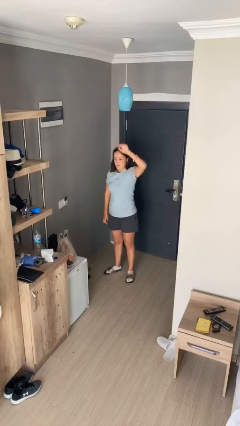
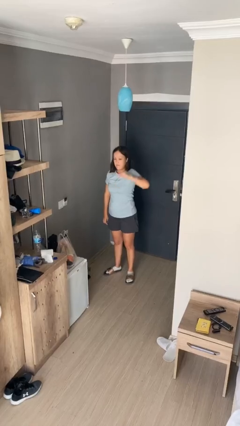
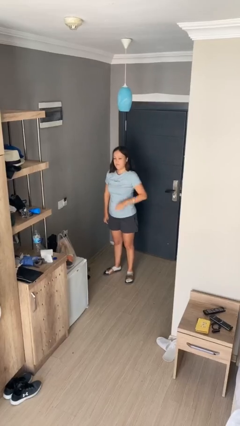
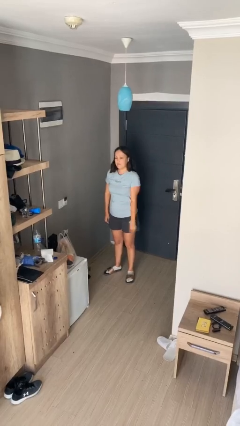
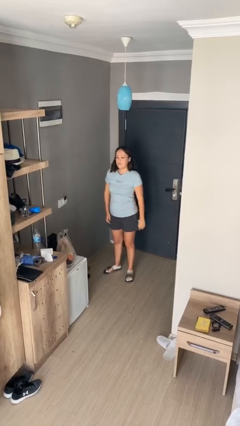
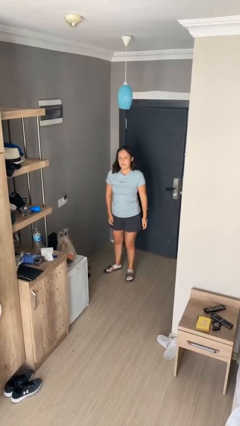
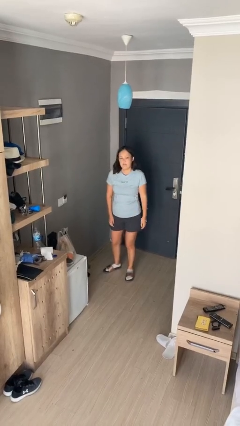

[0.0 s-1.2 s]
person gestures swipe down

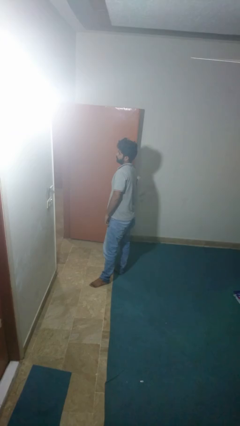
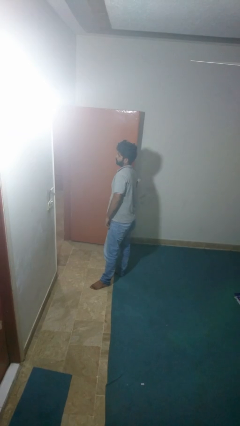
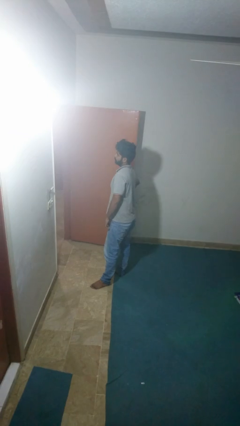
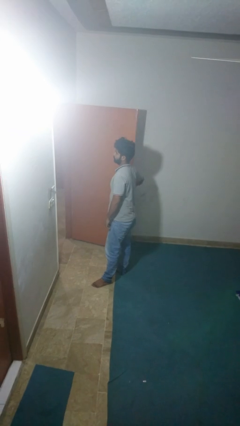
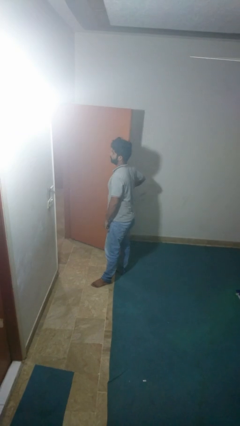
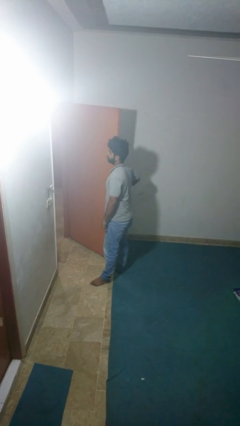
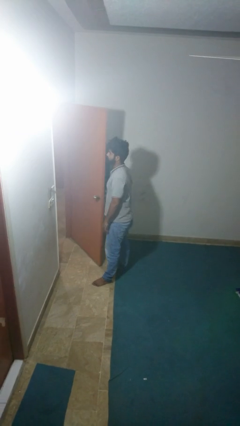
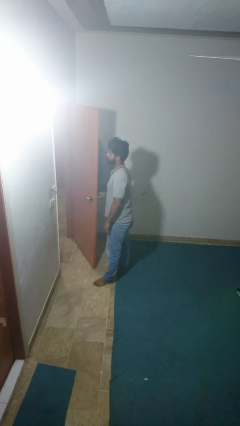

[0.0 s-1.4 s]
person closes facility door

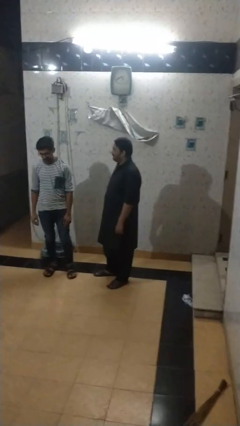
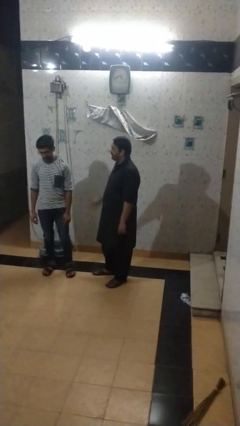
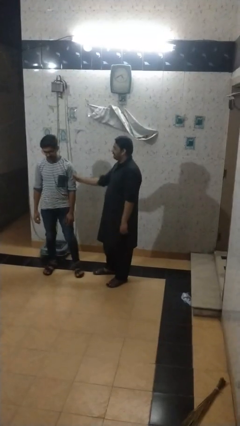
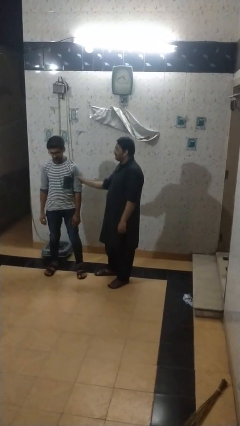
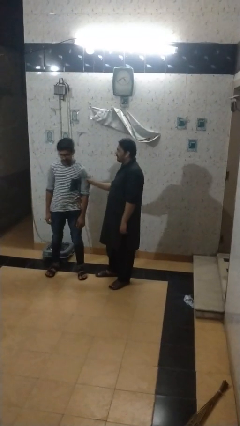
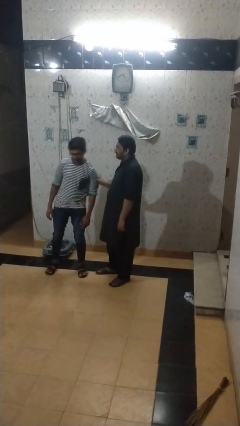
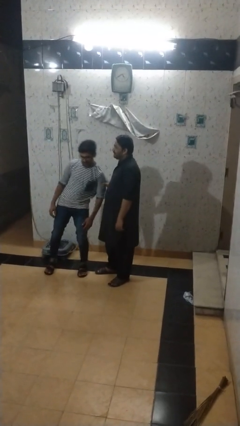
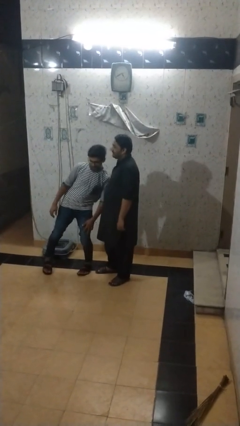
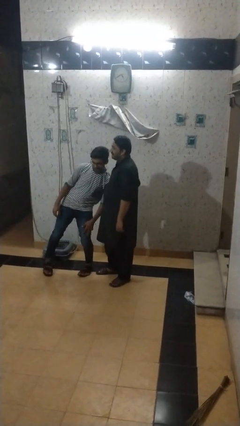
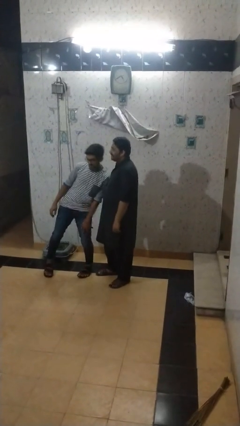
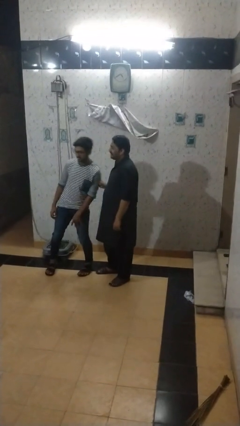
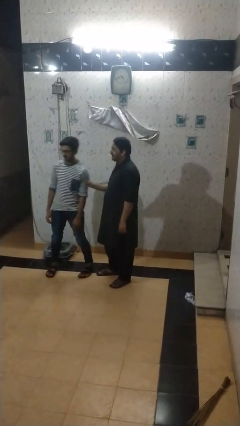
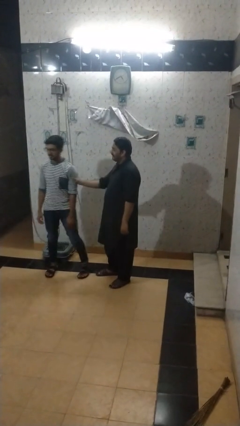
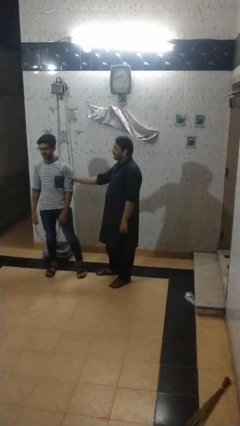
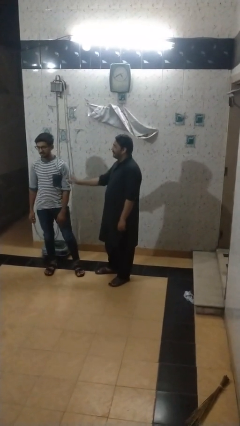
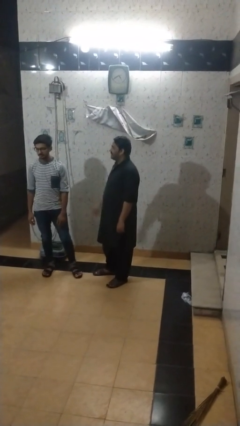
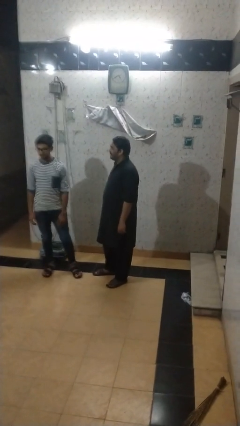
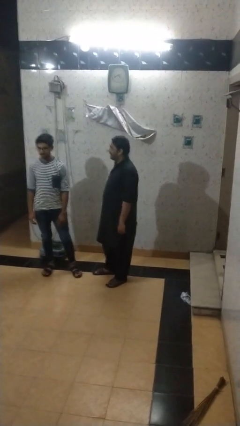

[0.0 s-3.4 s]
person grabs person by bicep

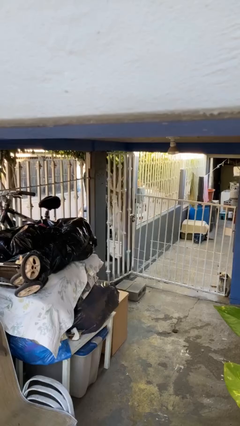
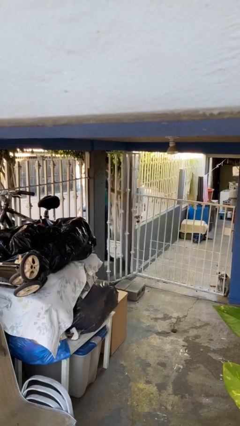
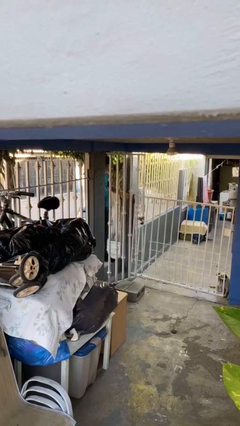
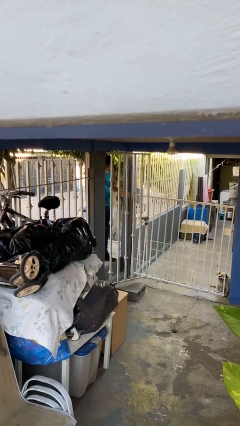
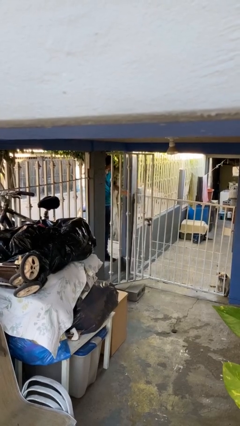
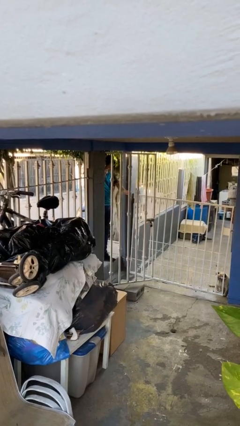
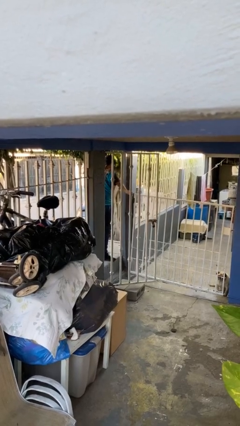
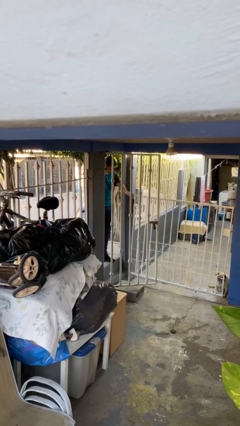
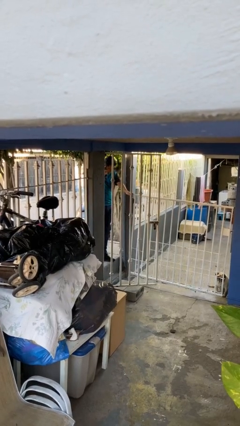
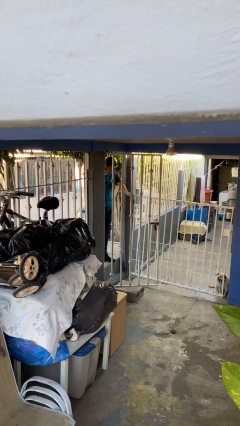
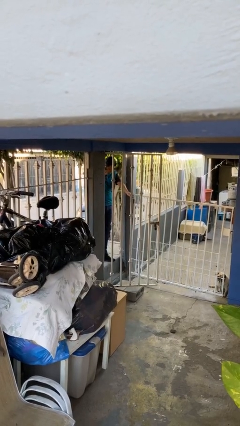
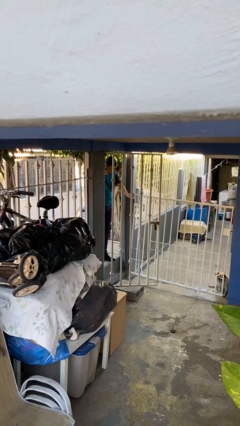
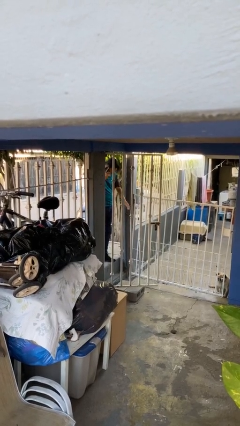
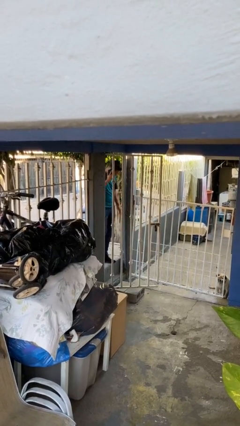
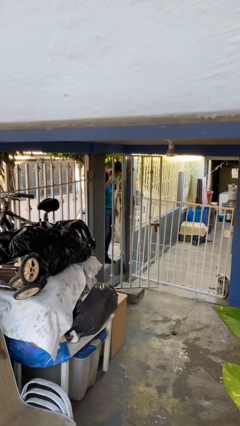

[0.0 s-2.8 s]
person opens facility door

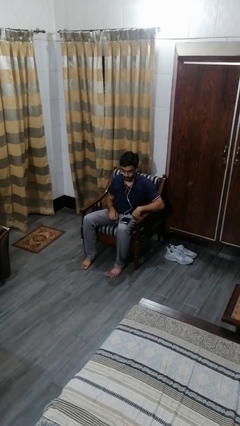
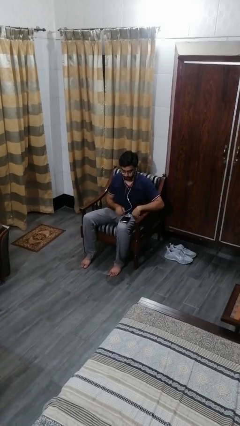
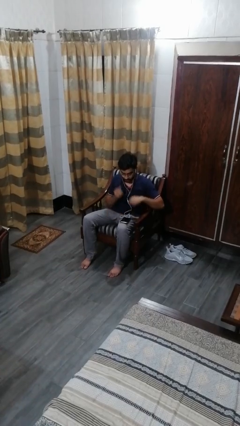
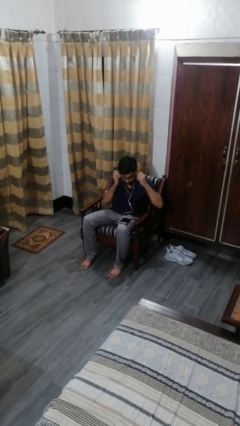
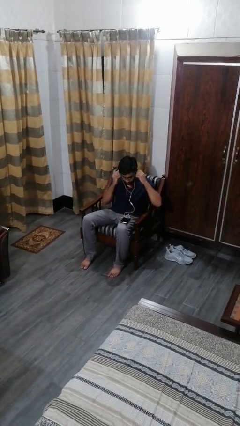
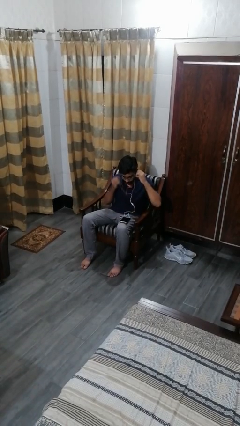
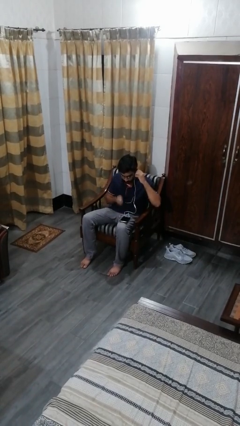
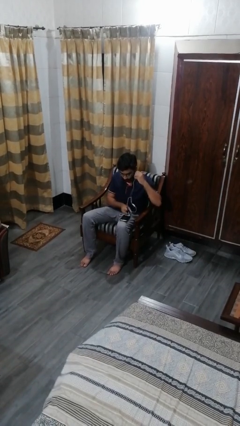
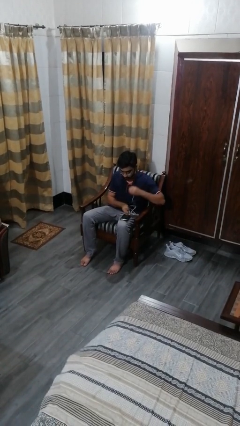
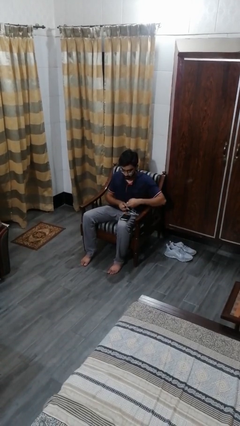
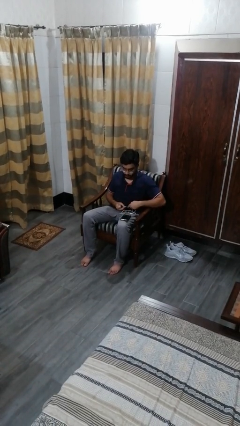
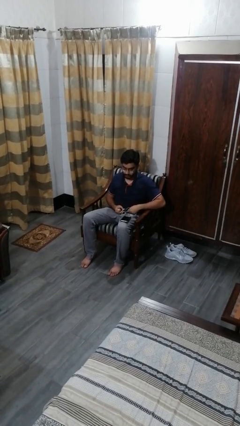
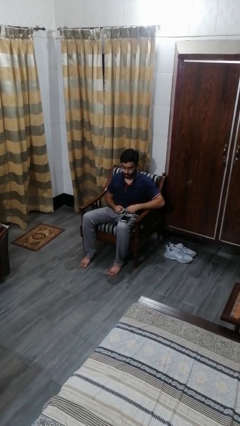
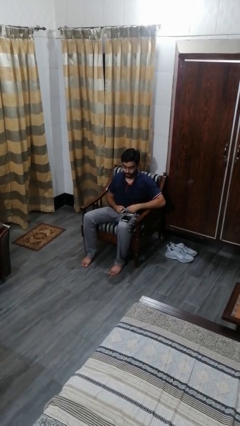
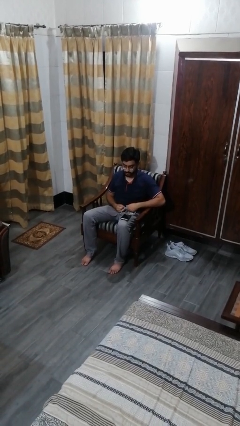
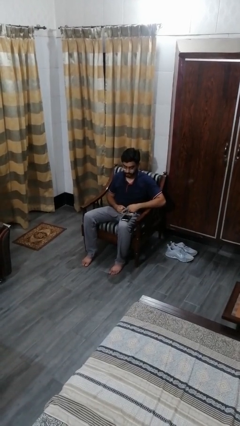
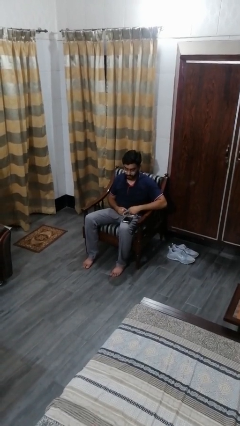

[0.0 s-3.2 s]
person takes off headphones

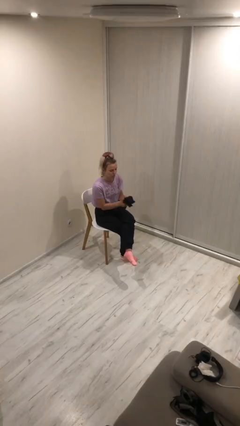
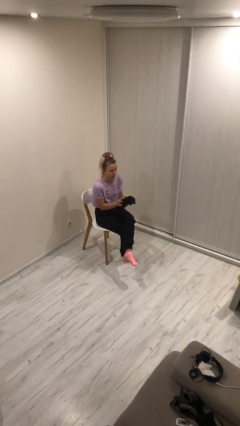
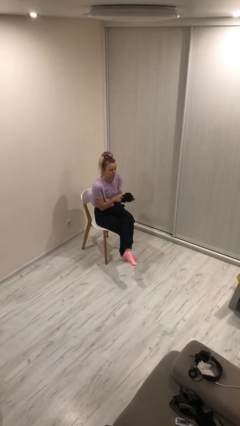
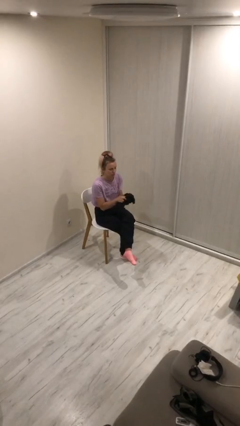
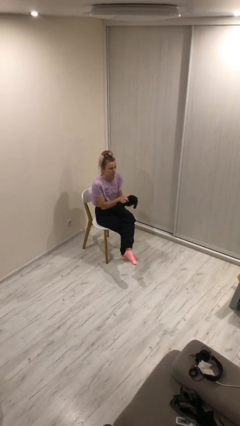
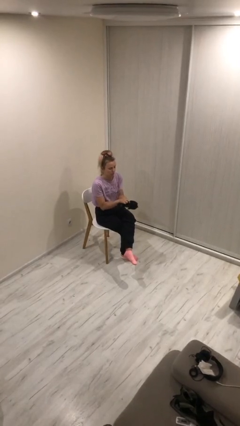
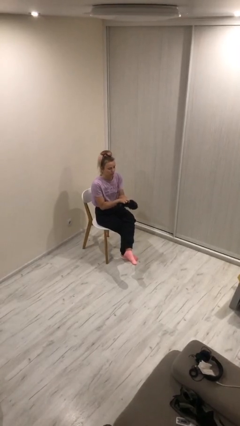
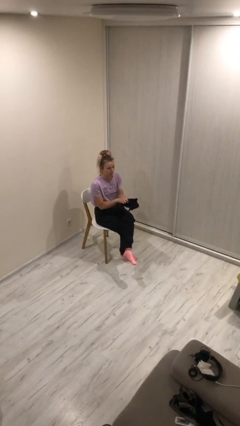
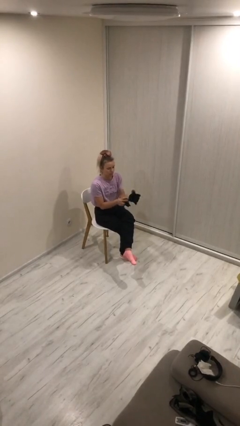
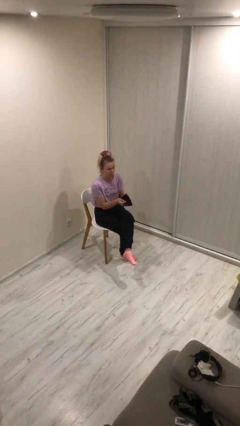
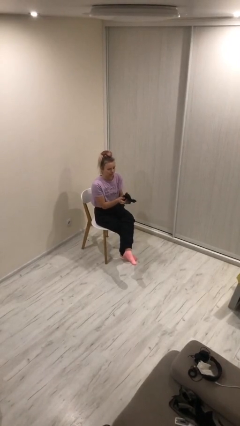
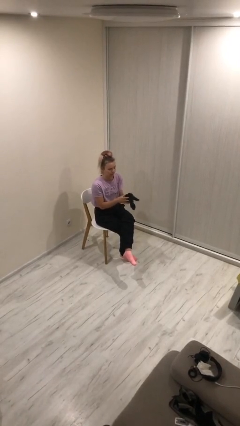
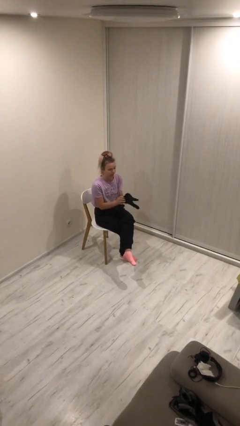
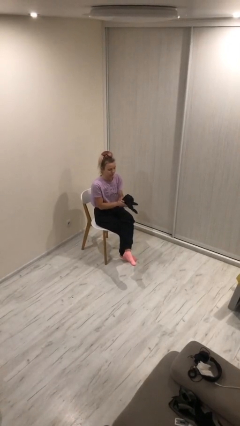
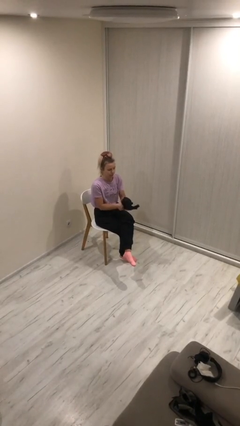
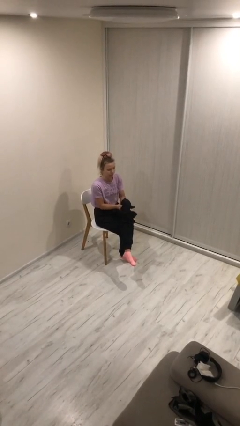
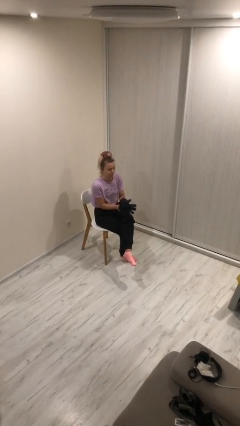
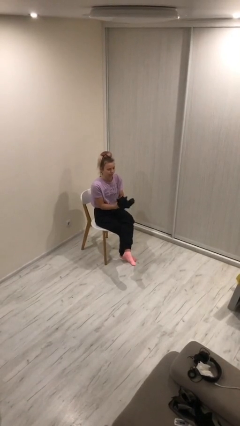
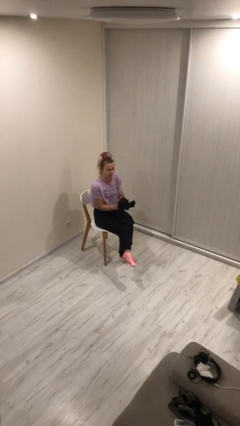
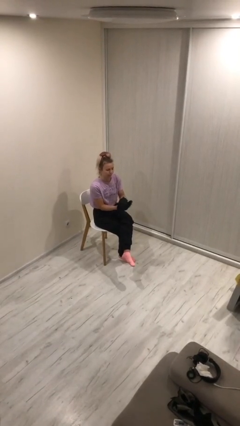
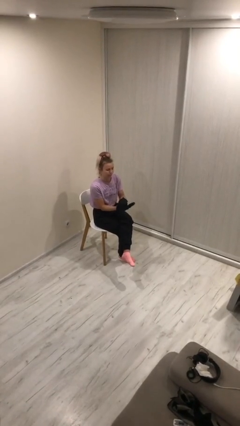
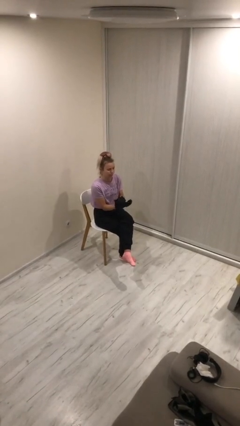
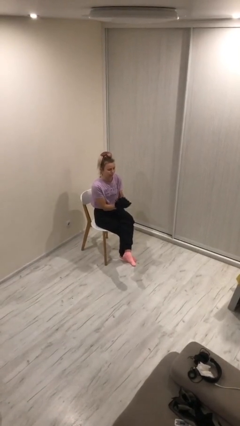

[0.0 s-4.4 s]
person puts on gloves

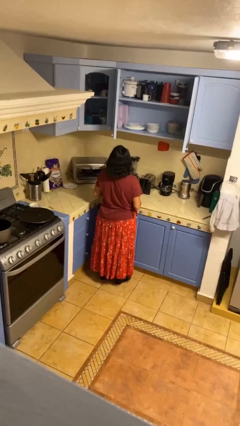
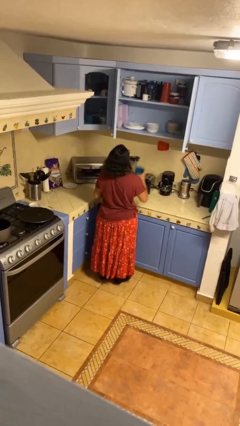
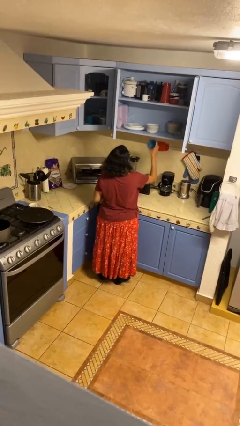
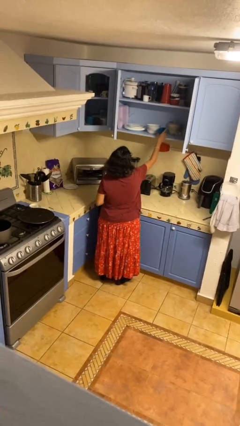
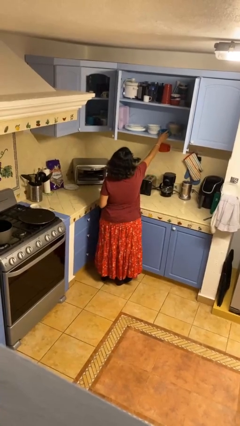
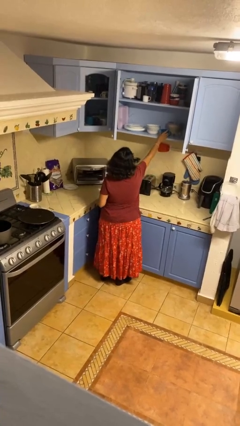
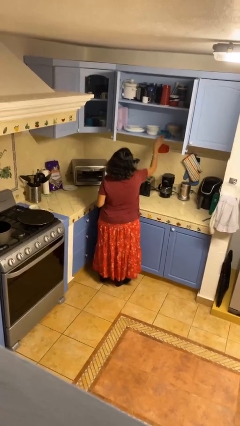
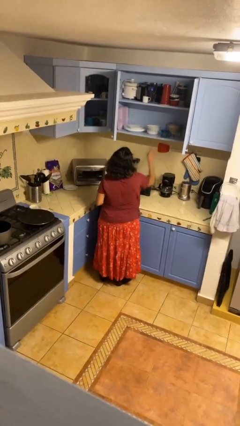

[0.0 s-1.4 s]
person puts down object into cabinet
